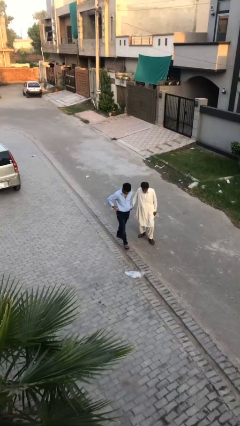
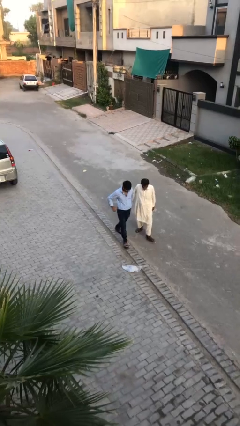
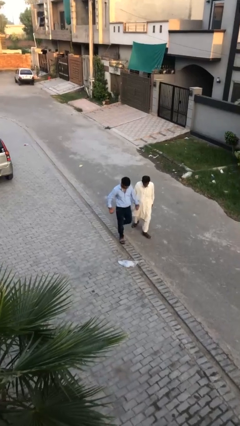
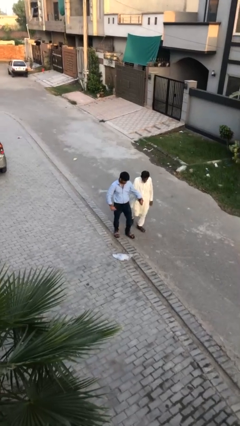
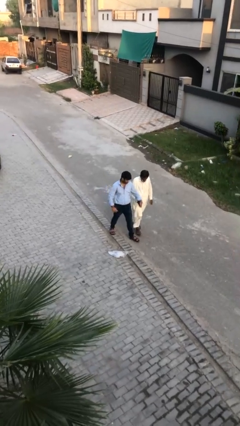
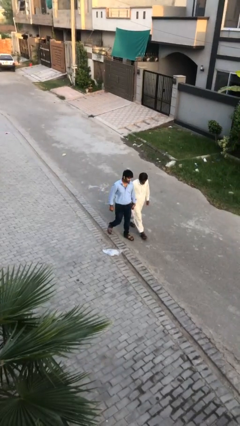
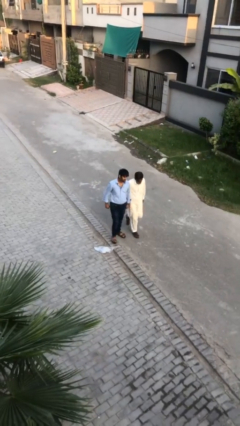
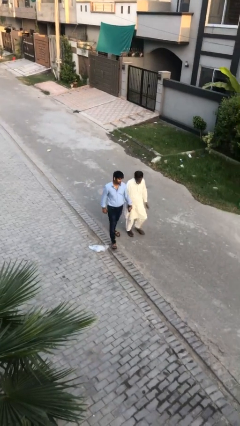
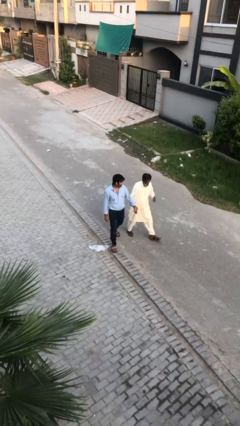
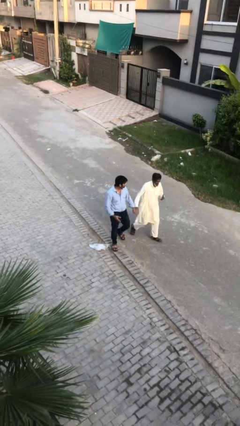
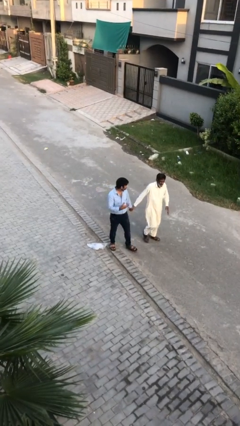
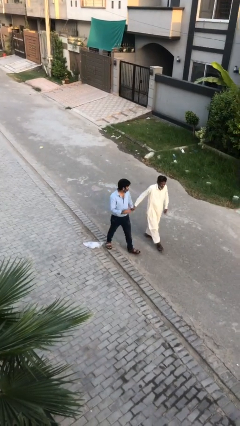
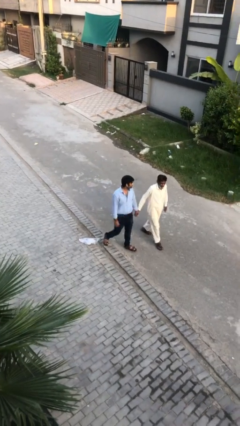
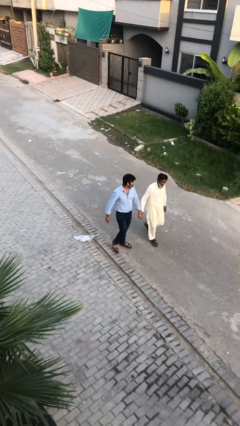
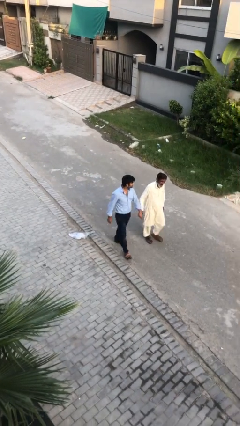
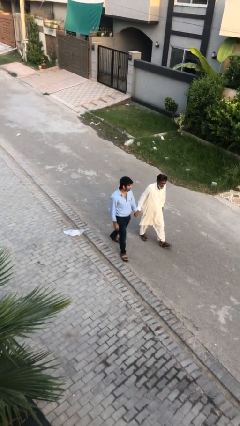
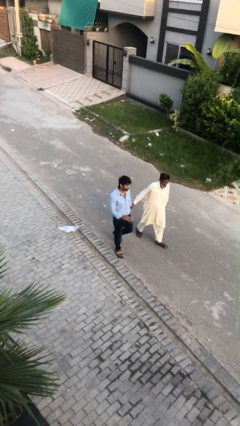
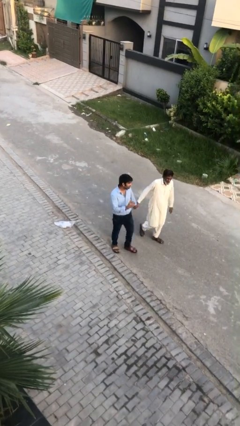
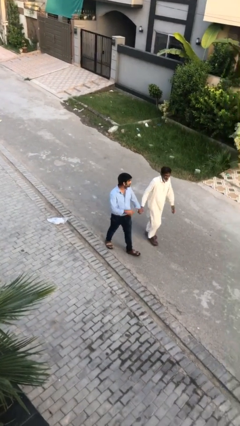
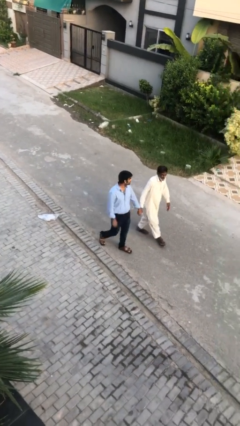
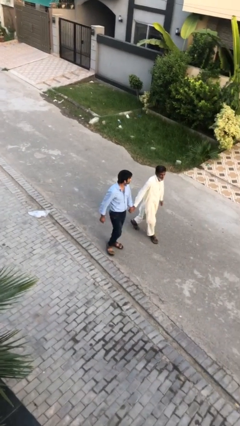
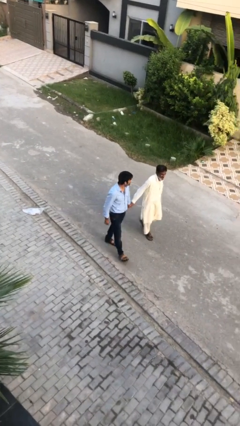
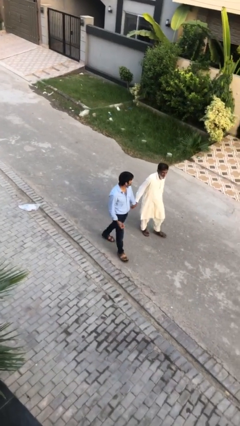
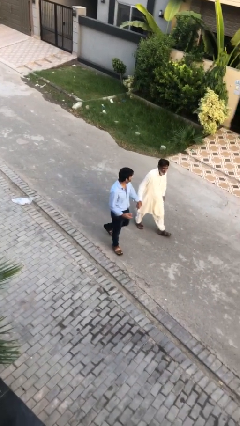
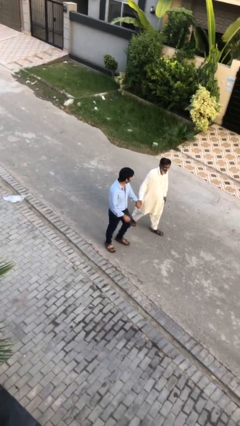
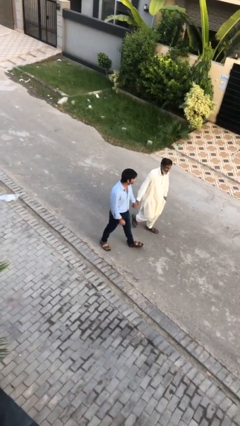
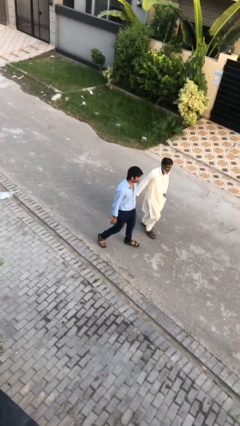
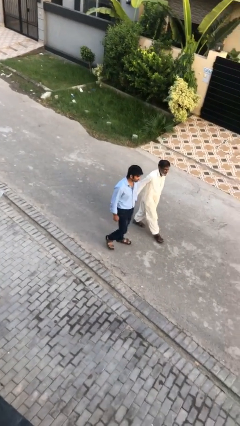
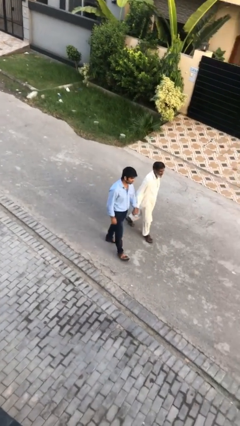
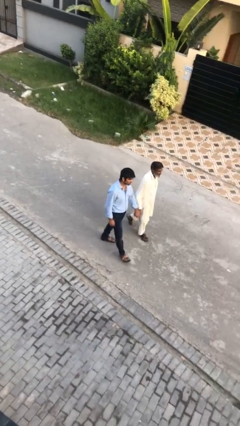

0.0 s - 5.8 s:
person holds hand

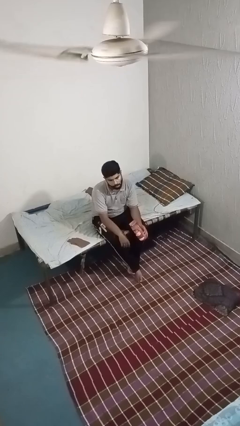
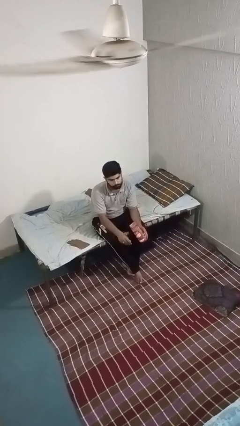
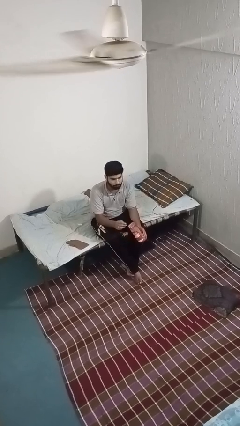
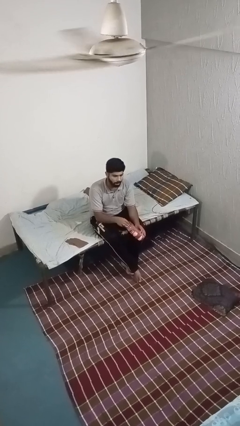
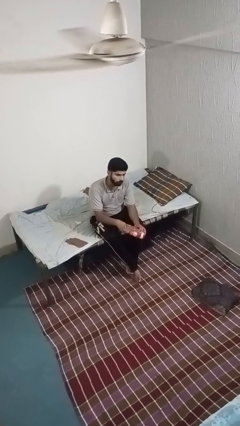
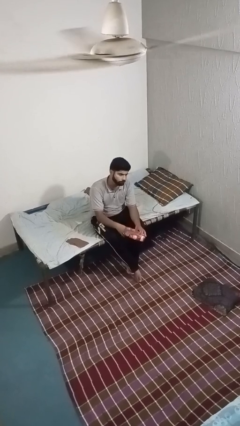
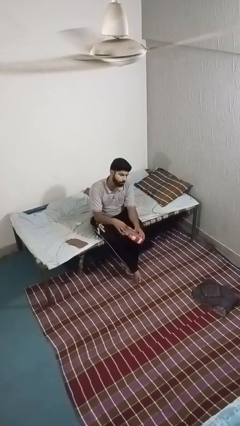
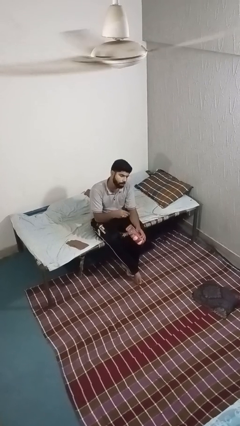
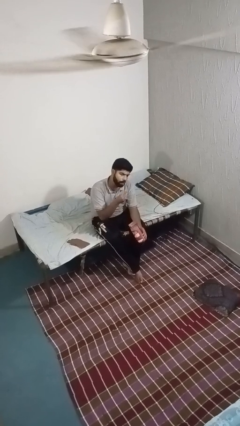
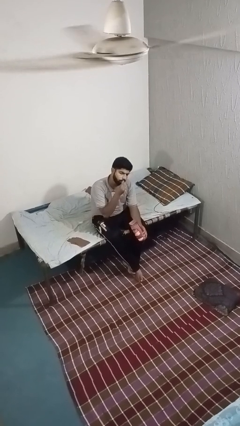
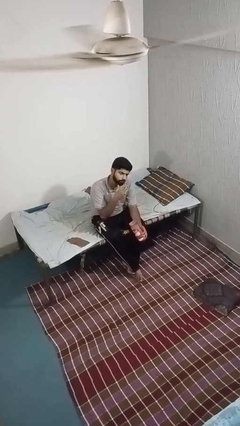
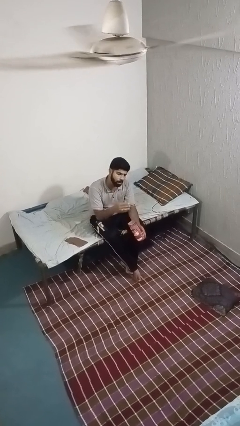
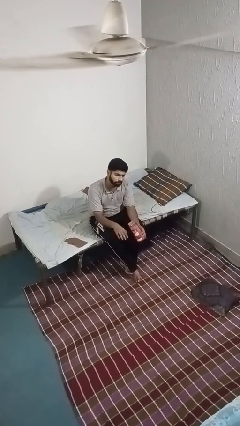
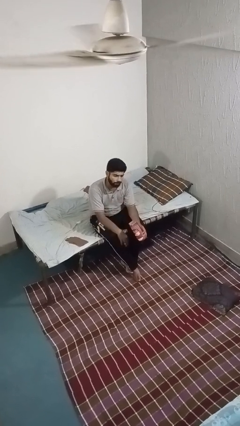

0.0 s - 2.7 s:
person eats snack from bag

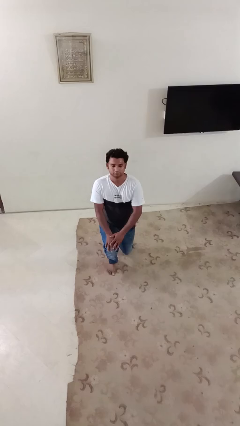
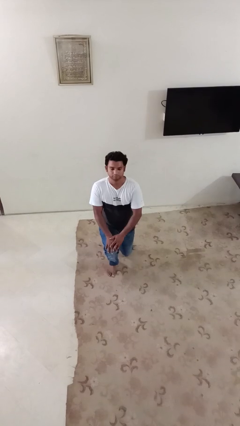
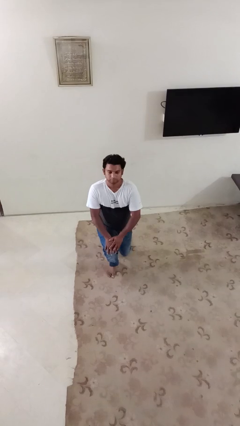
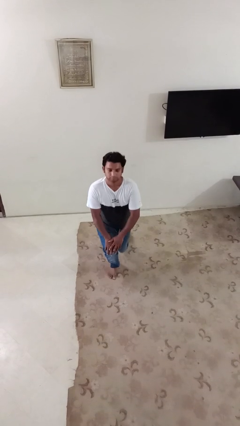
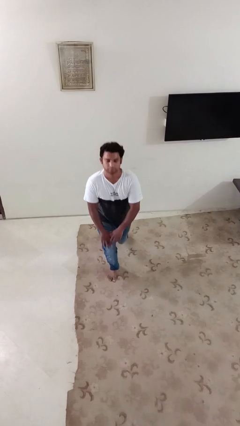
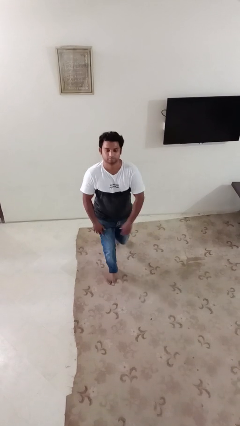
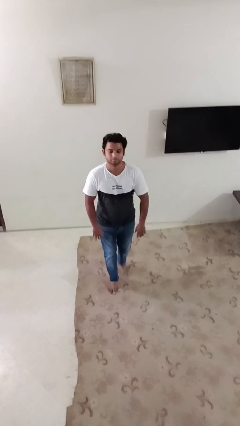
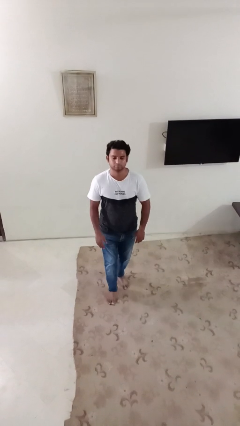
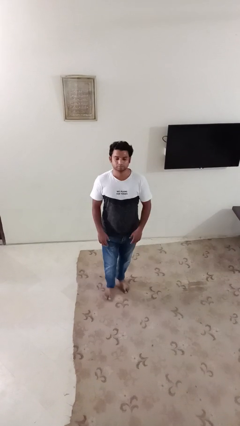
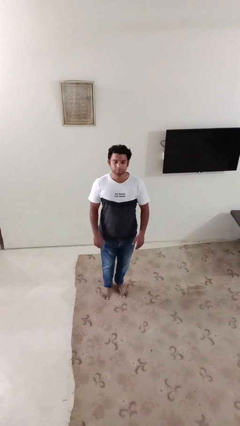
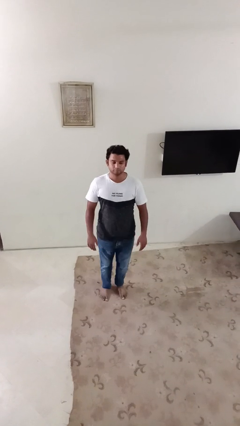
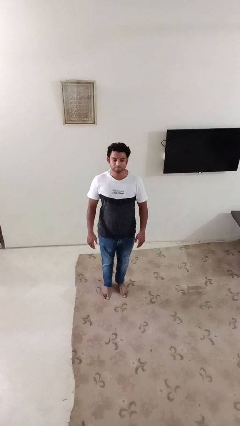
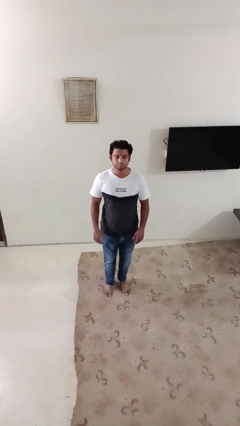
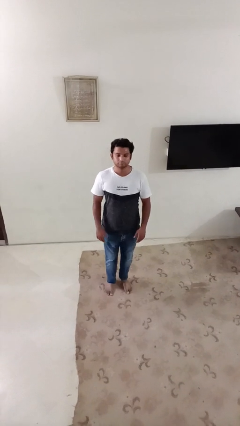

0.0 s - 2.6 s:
person stands up from floor

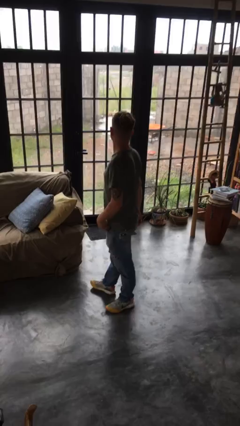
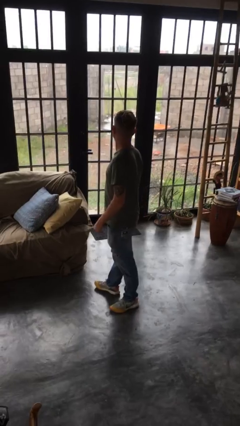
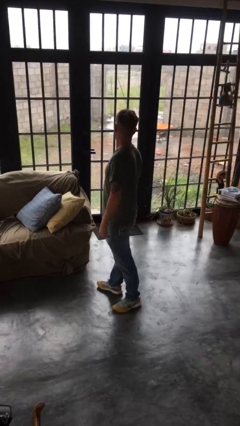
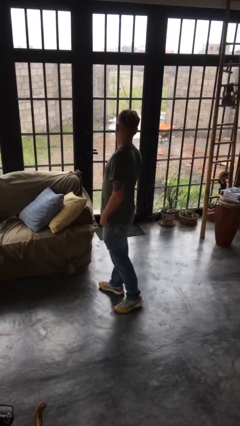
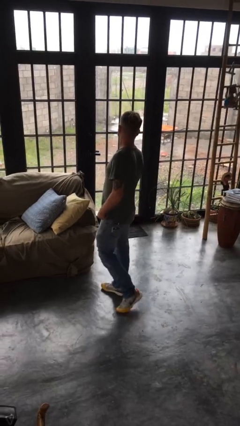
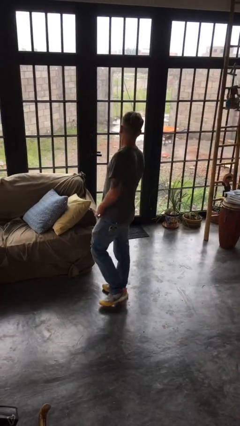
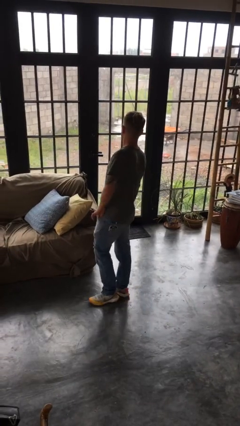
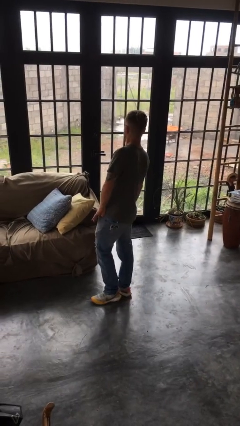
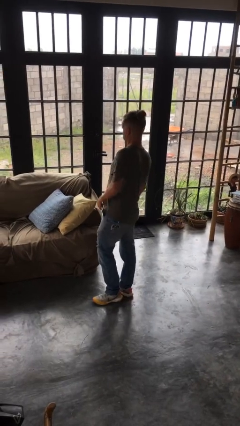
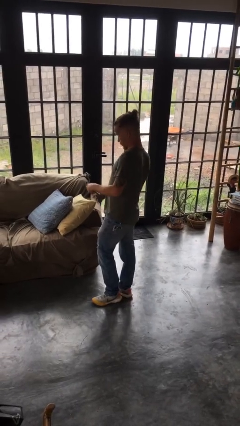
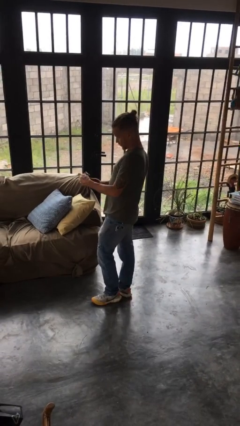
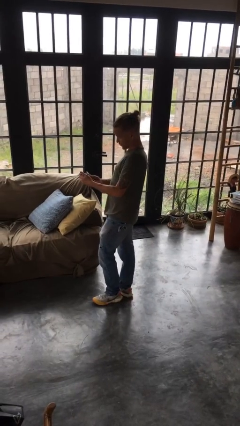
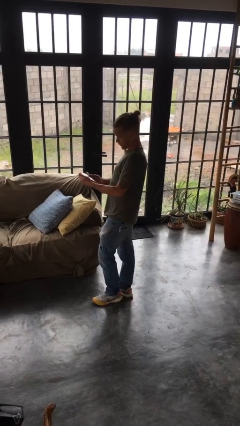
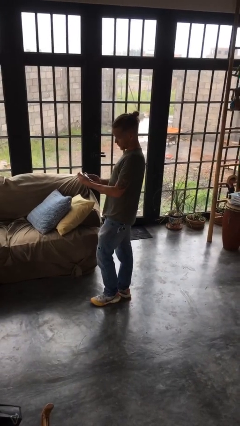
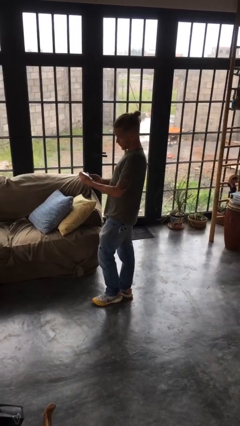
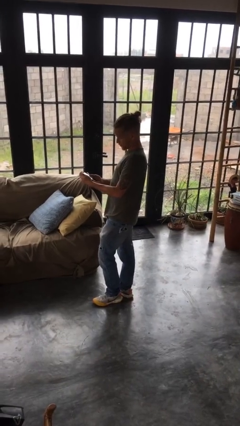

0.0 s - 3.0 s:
person takes phone from pocket

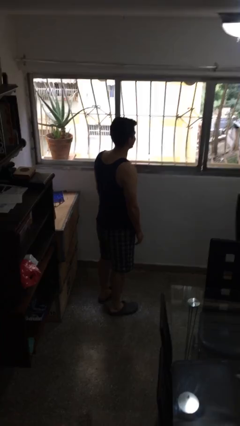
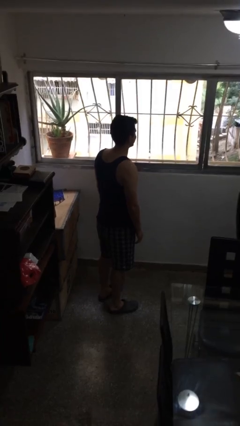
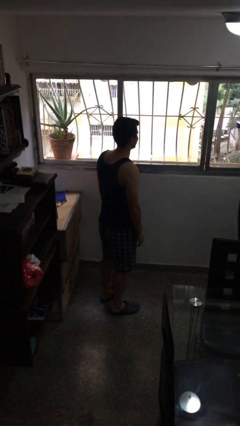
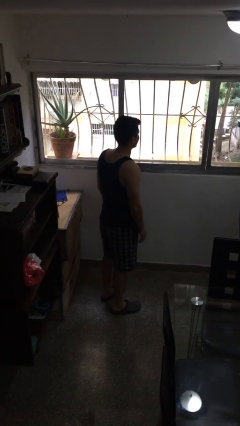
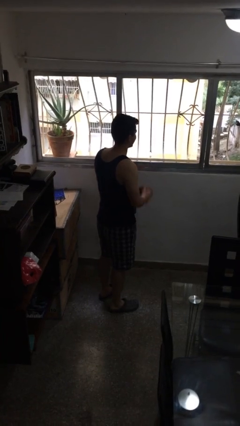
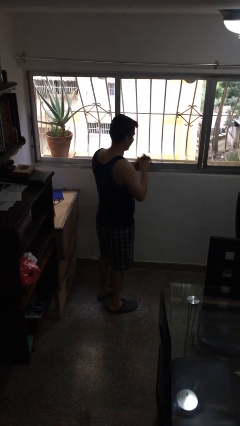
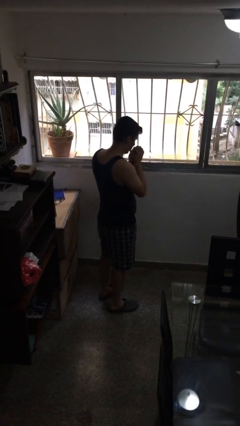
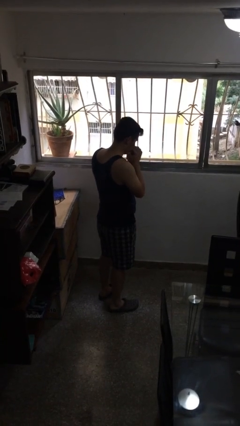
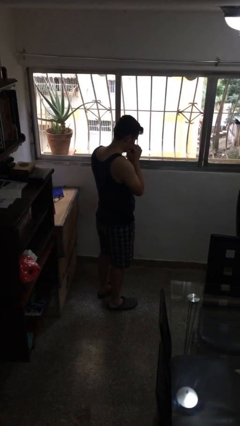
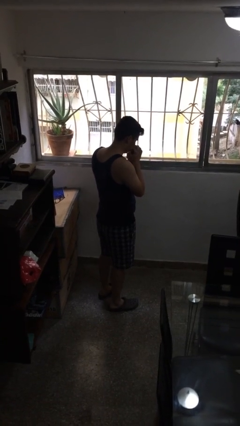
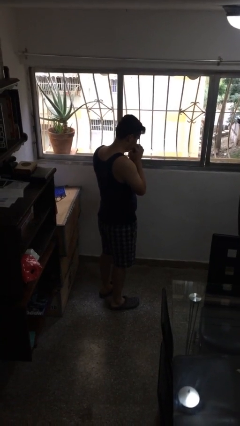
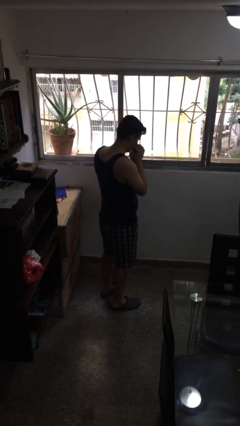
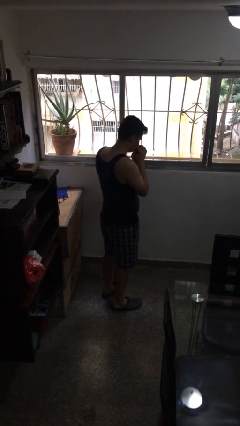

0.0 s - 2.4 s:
person prays

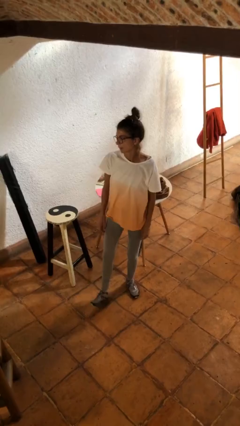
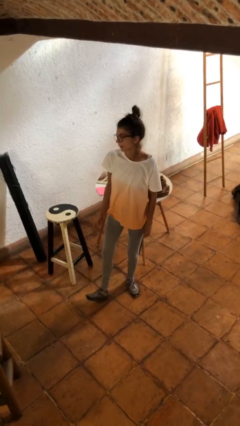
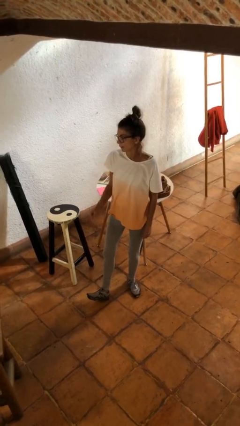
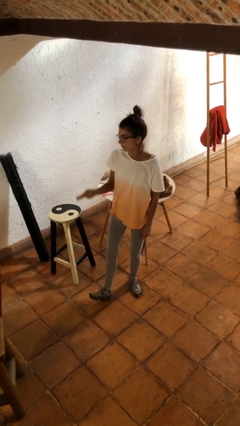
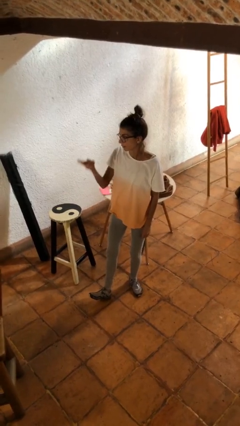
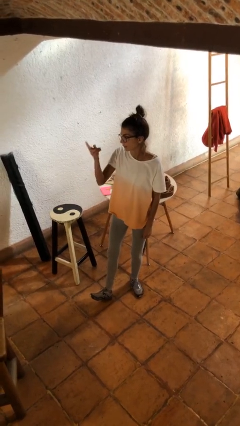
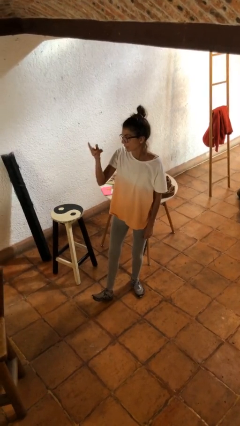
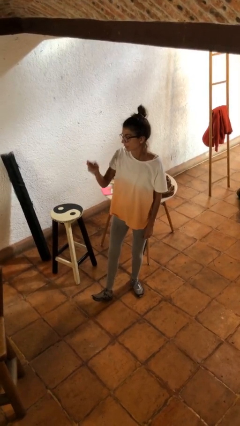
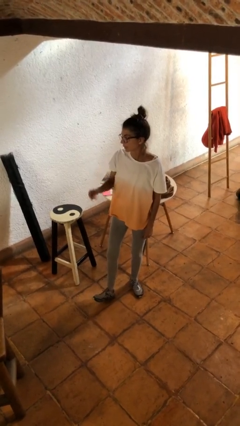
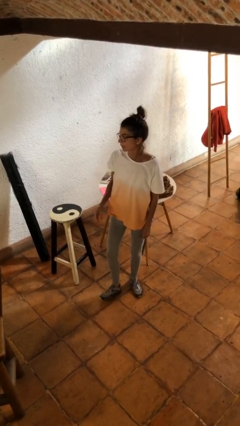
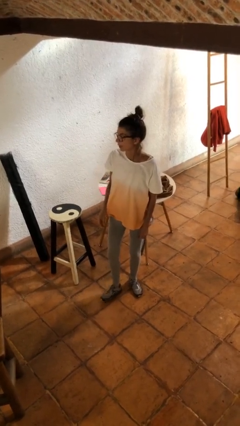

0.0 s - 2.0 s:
person gestures swipe up
